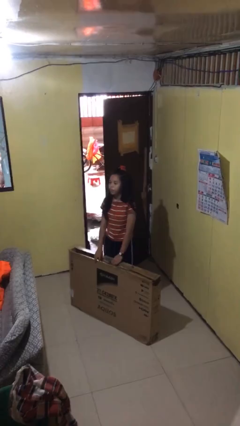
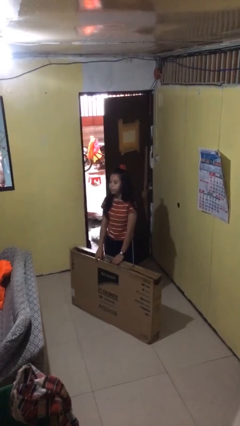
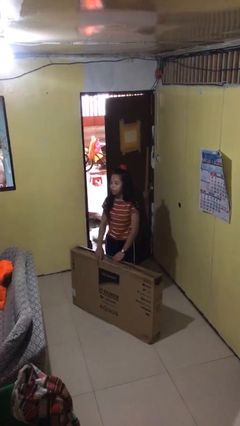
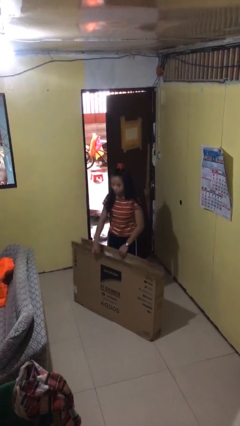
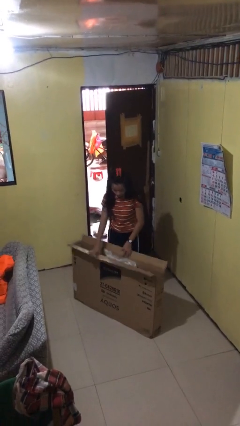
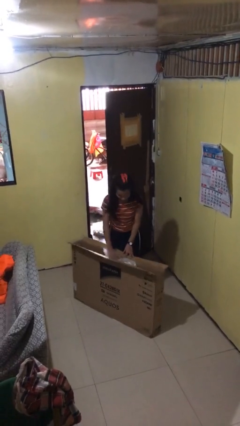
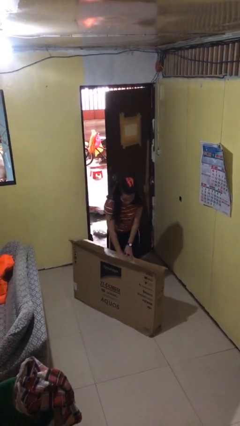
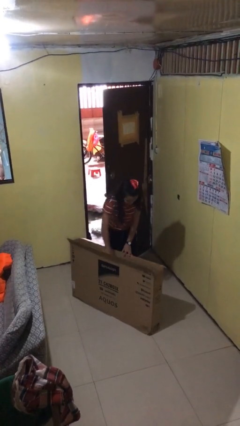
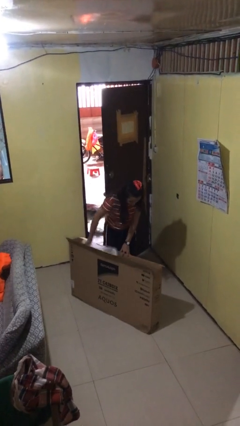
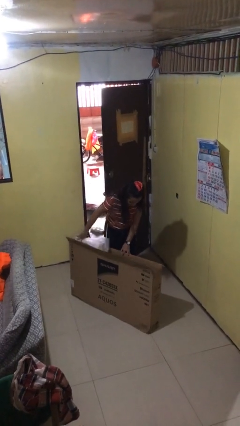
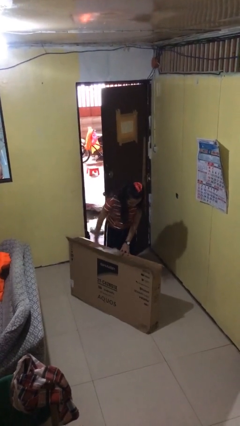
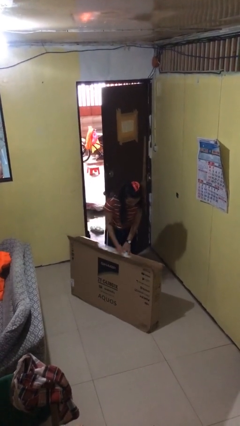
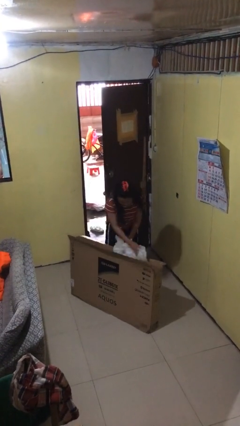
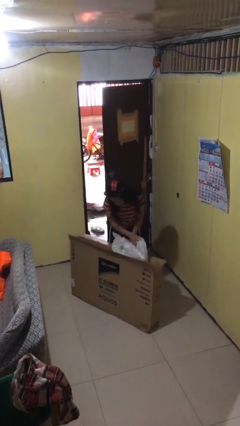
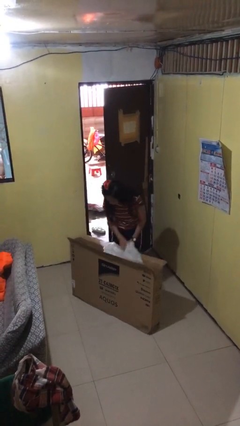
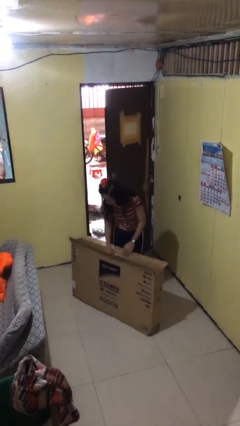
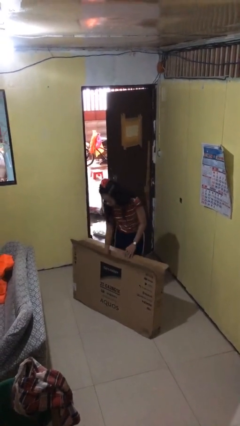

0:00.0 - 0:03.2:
person searches in box

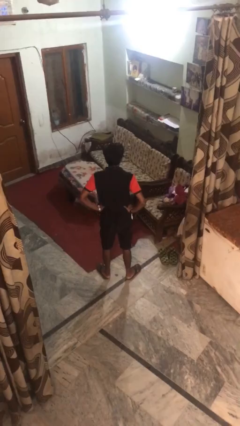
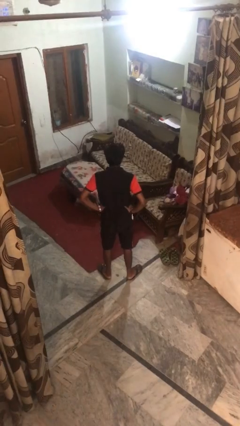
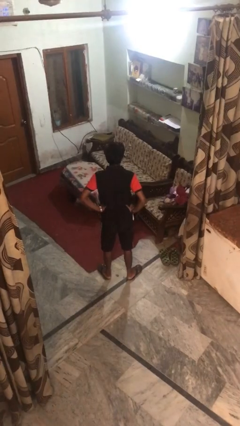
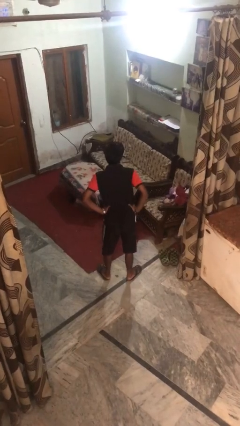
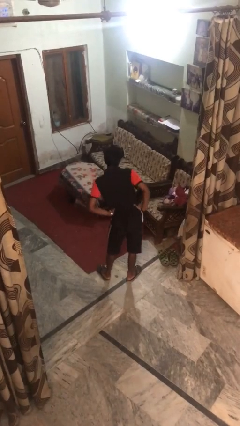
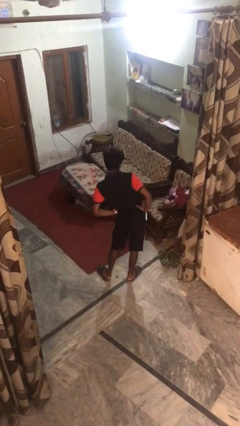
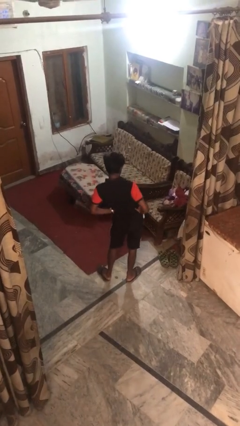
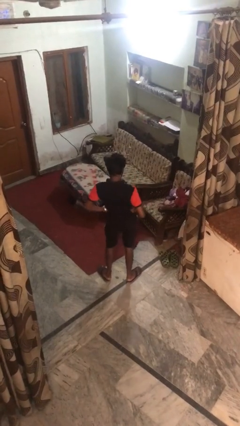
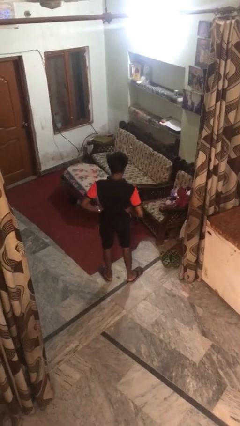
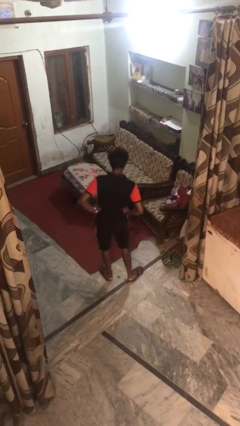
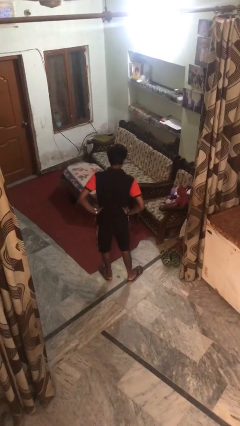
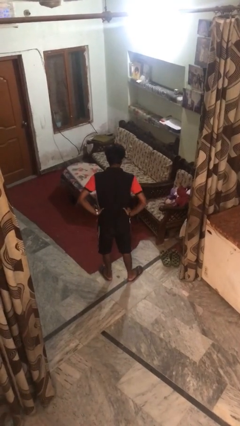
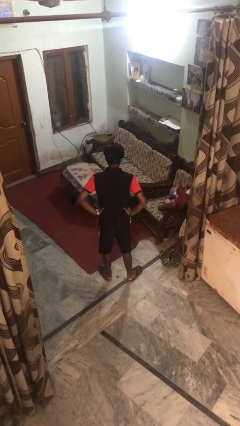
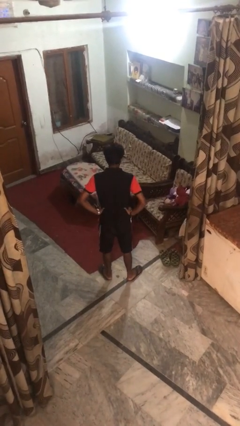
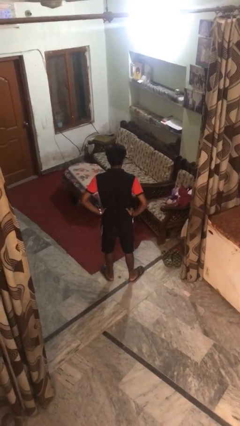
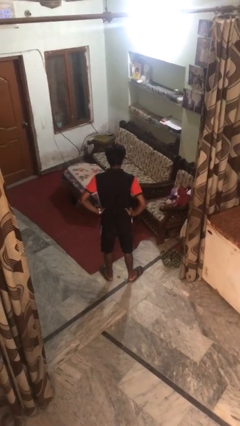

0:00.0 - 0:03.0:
person wiggles hips

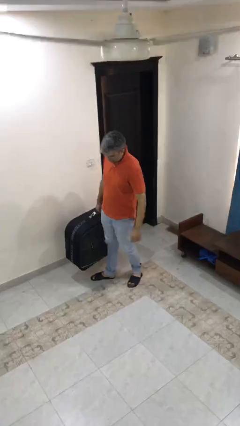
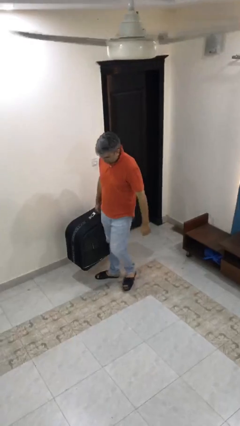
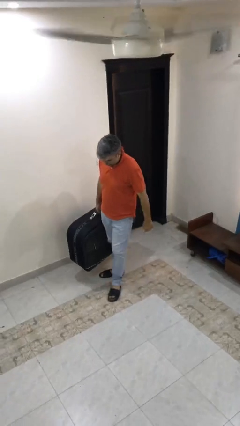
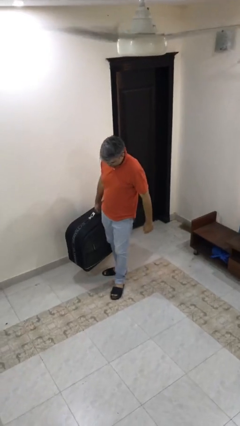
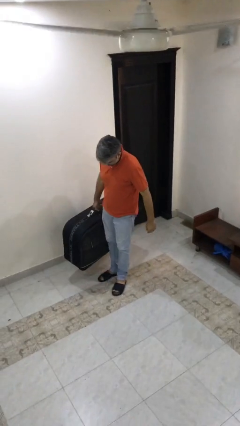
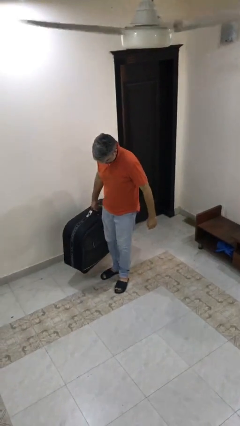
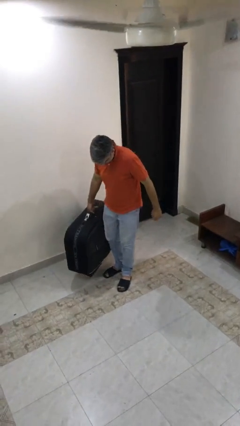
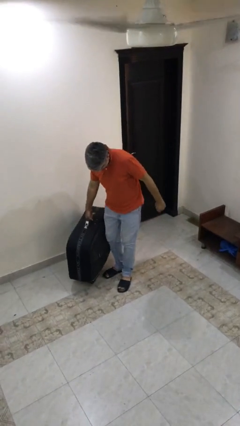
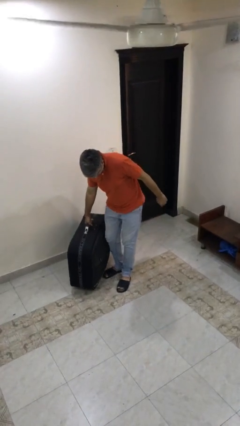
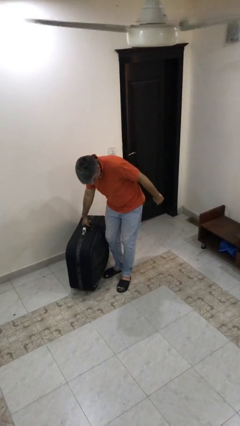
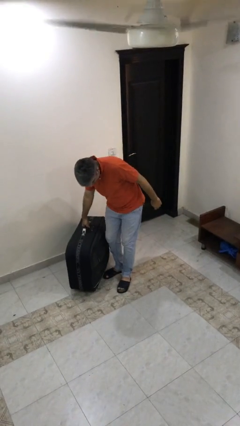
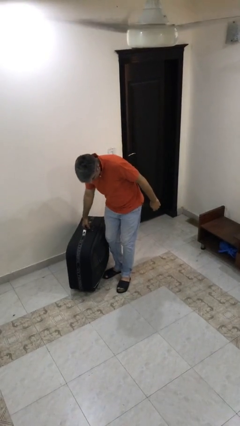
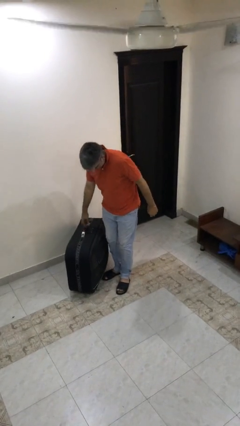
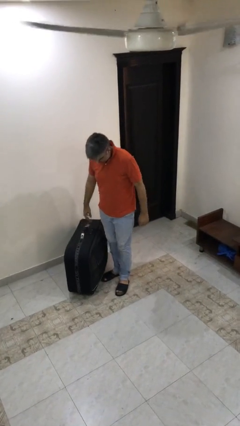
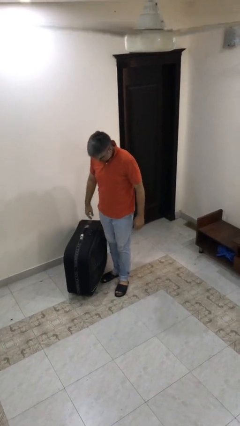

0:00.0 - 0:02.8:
person puts down object on floor

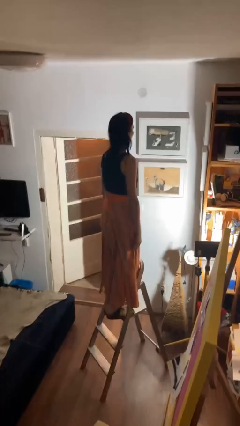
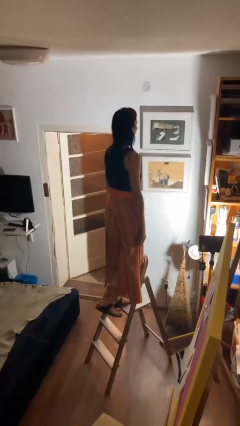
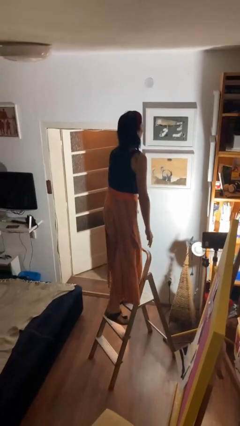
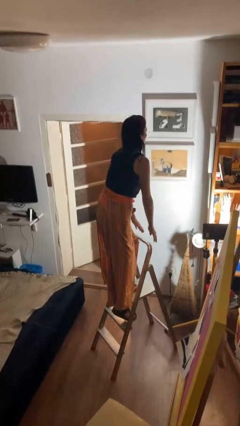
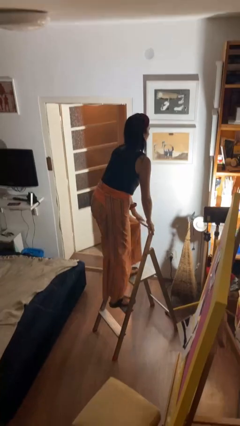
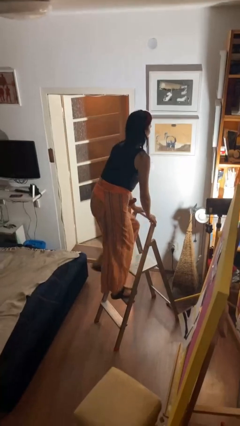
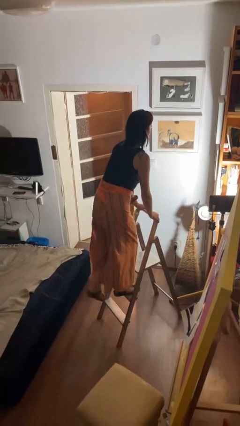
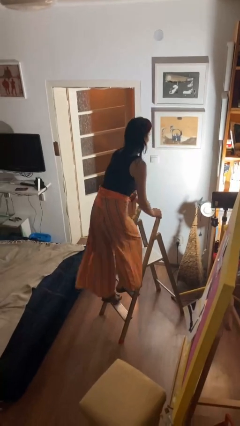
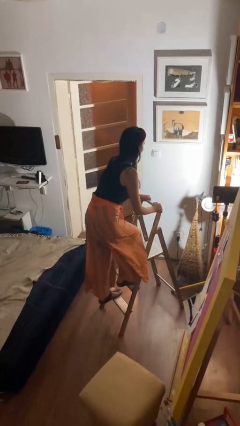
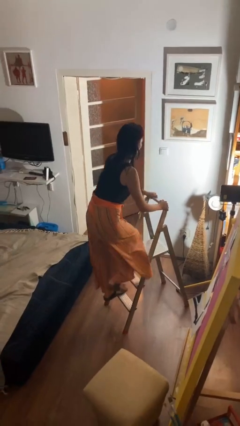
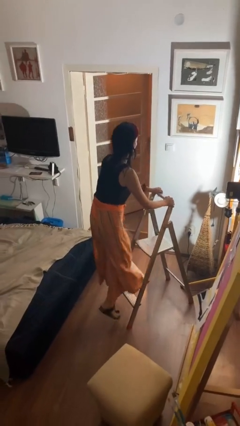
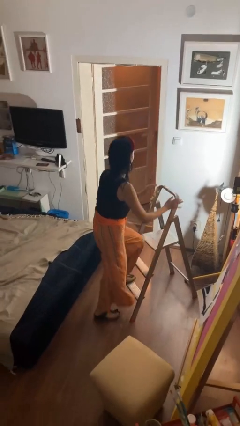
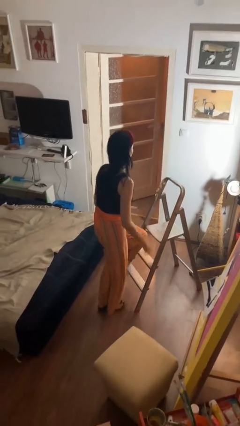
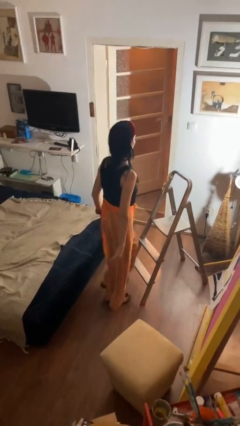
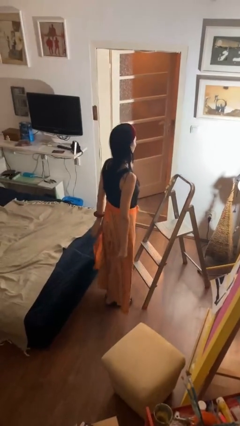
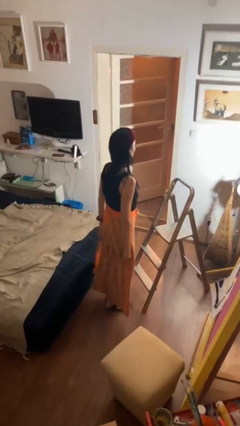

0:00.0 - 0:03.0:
person climbs down ladder

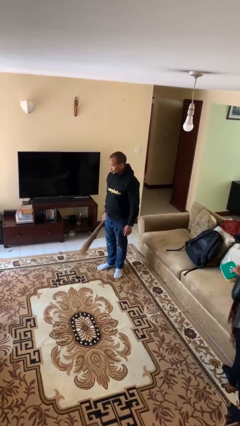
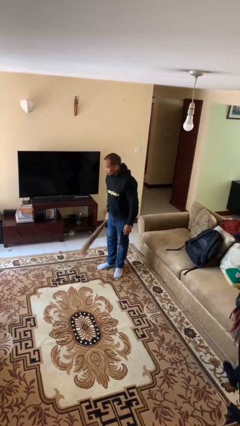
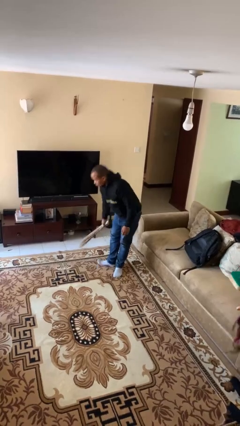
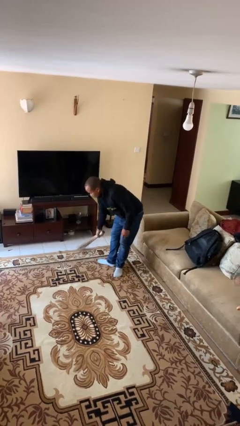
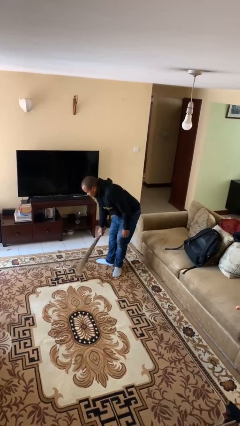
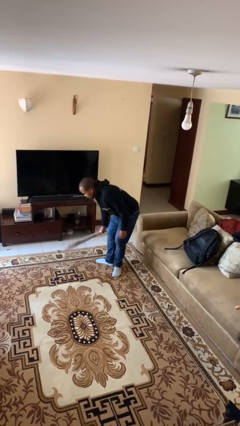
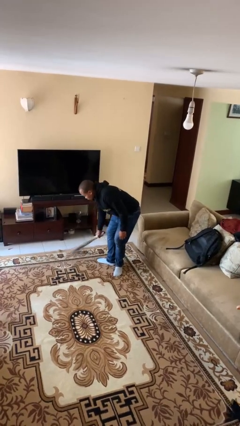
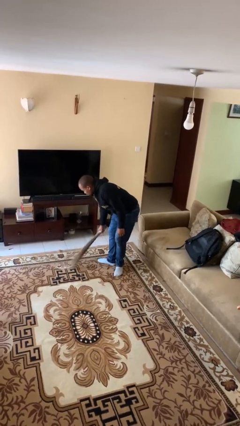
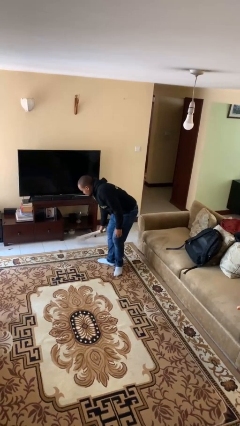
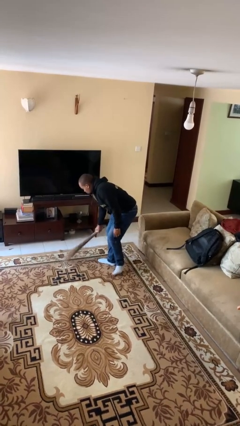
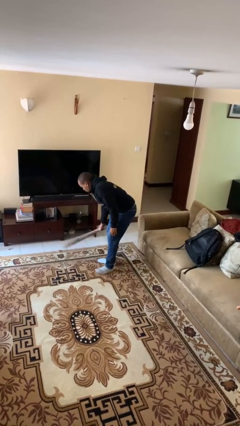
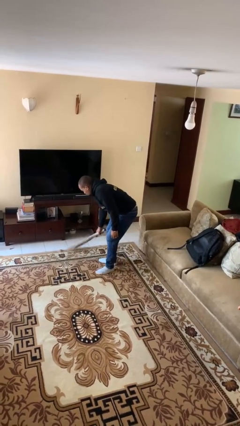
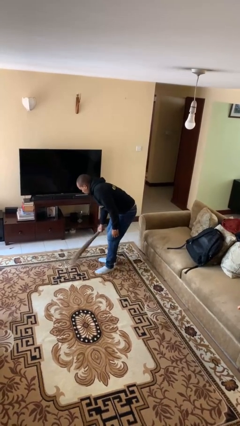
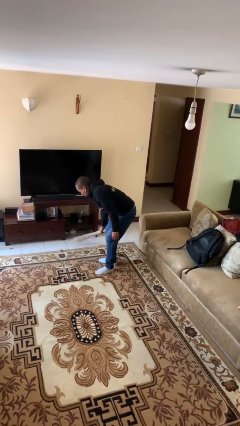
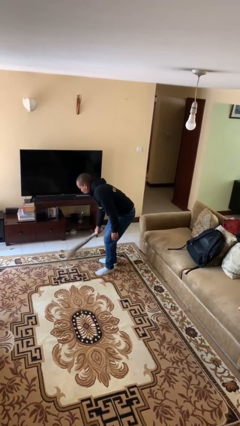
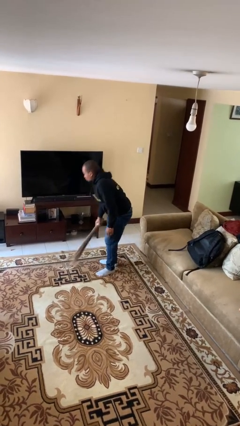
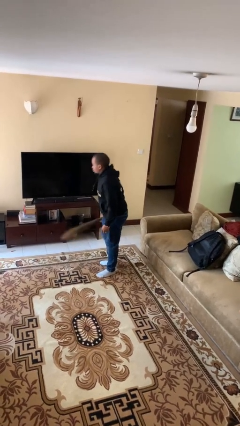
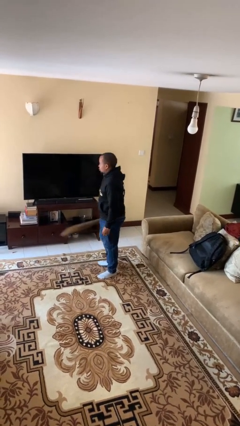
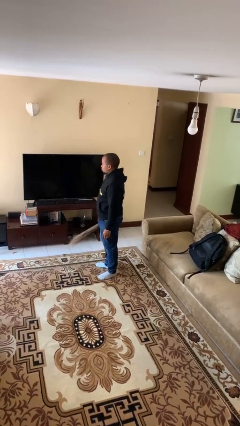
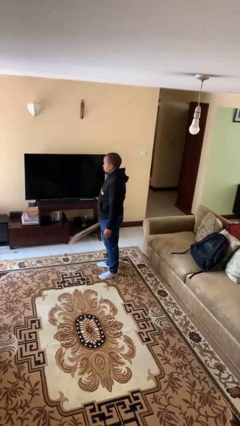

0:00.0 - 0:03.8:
person sweeps floor

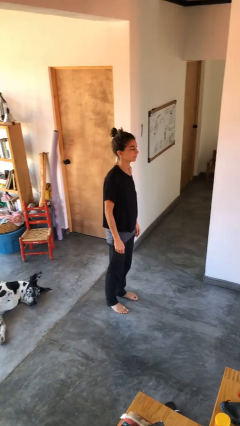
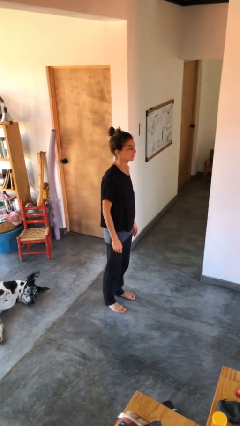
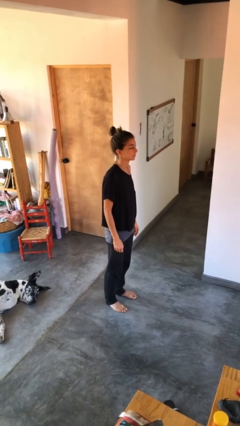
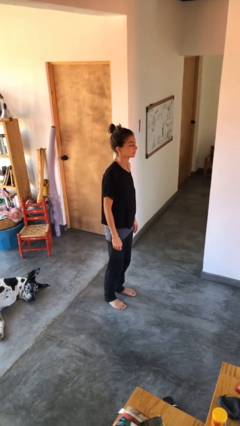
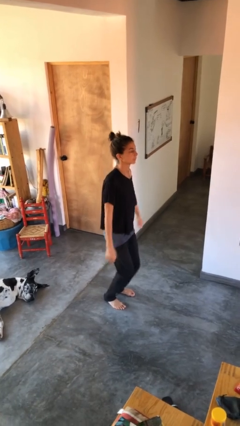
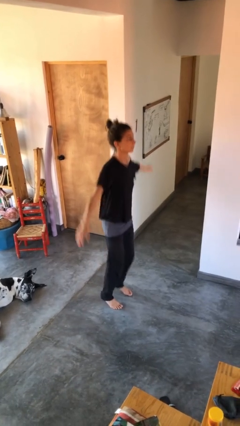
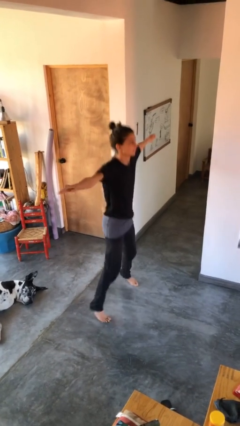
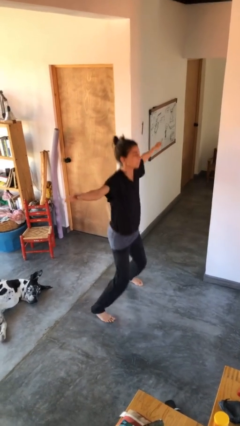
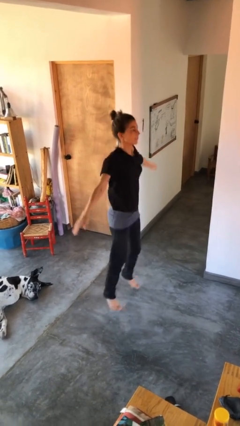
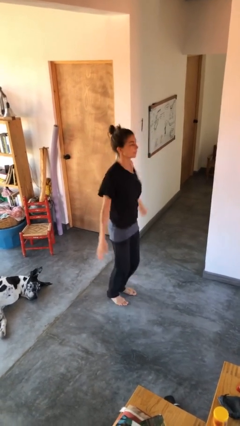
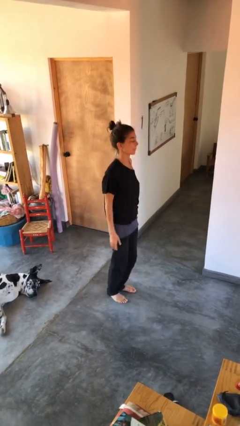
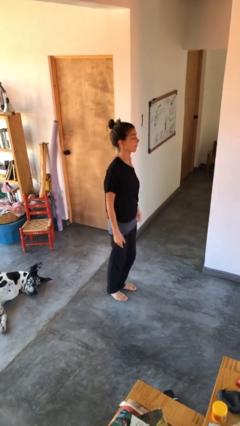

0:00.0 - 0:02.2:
person exercises with jumping jacks
